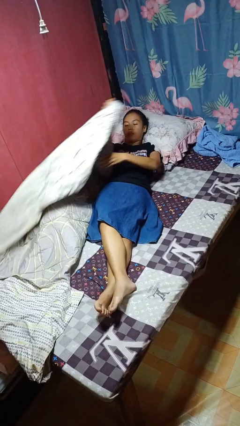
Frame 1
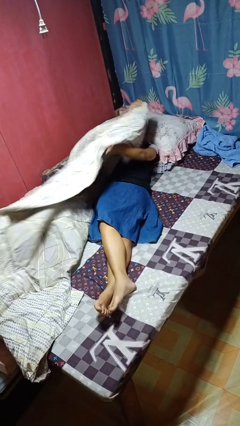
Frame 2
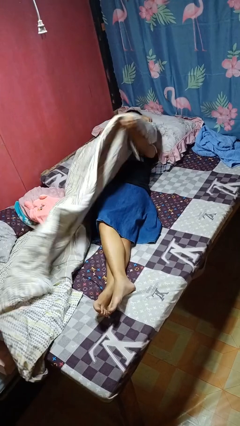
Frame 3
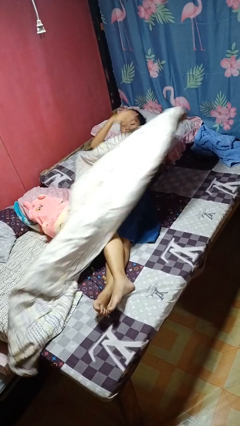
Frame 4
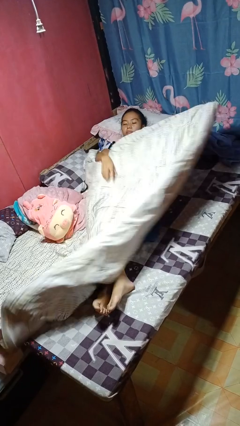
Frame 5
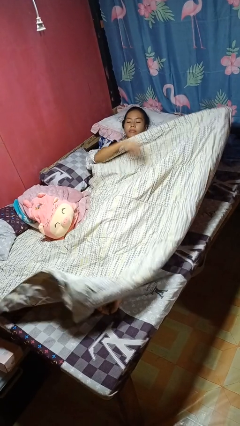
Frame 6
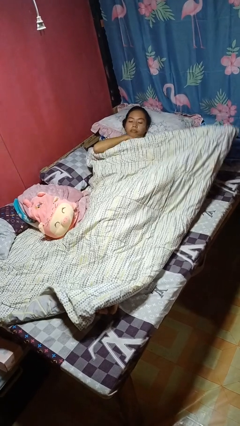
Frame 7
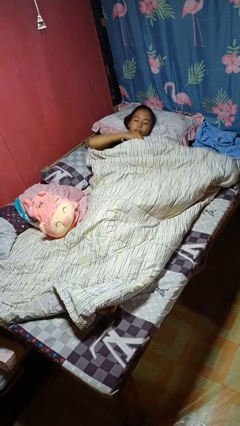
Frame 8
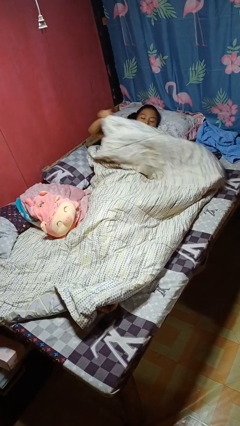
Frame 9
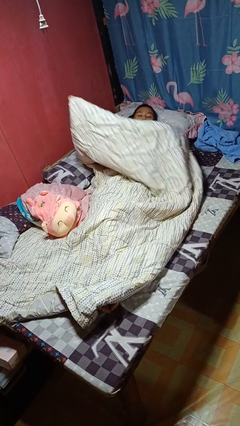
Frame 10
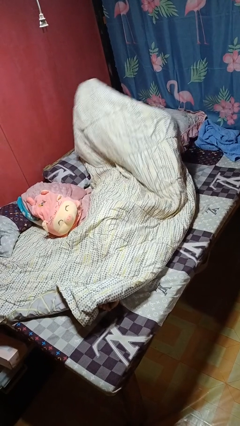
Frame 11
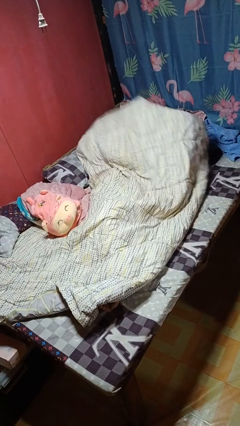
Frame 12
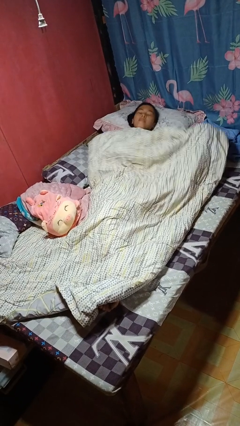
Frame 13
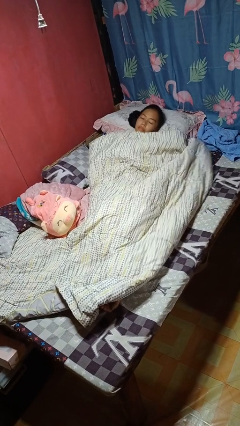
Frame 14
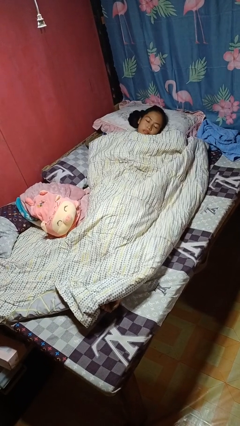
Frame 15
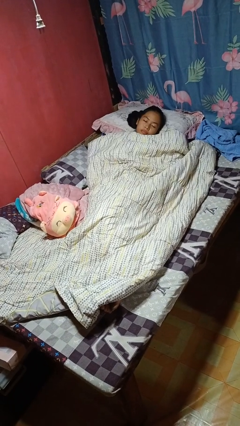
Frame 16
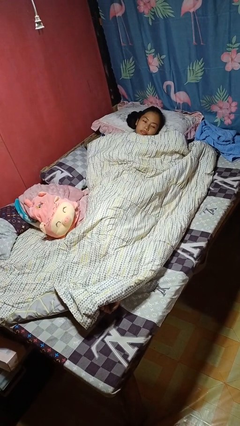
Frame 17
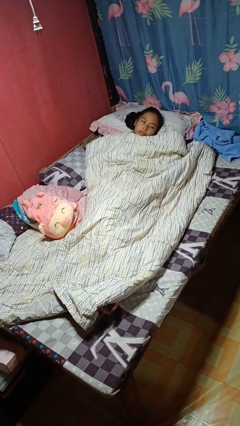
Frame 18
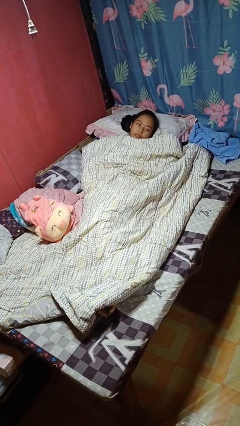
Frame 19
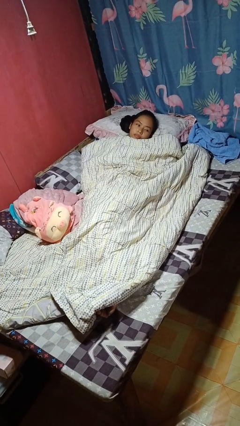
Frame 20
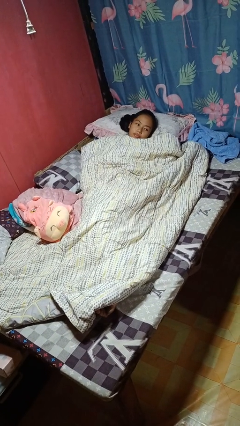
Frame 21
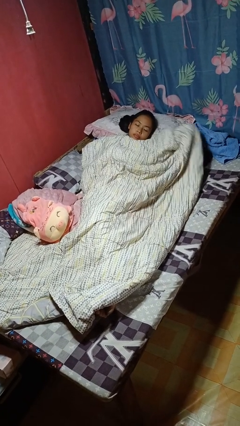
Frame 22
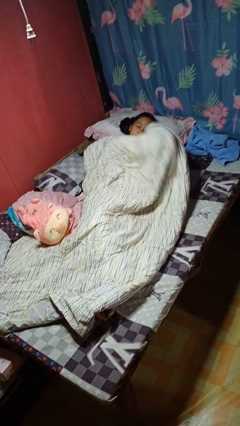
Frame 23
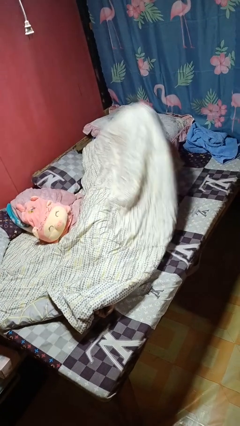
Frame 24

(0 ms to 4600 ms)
person covers with bedsheets

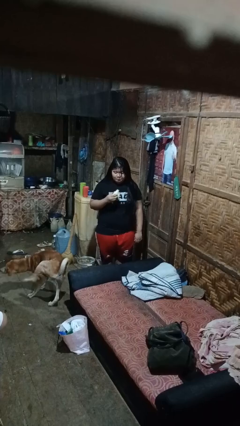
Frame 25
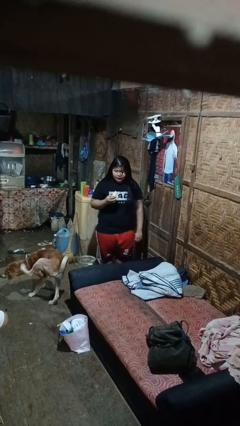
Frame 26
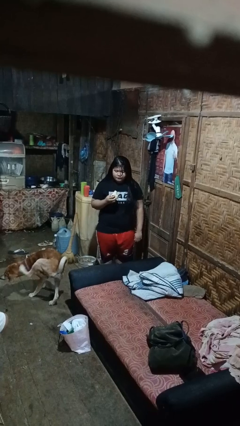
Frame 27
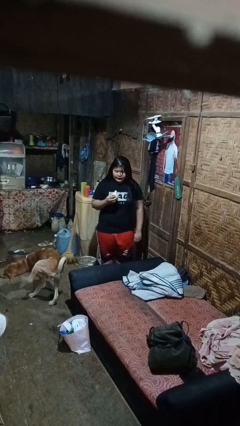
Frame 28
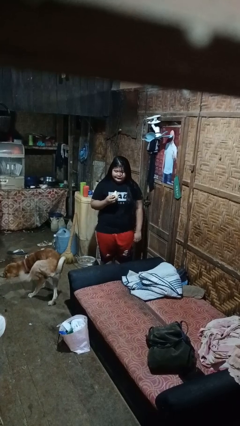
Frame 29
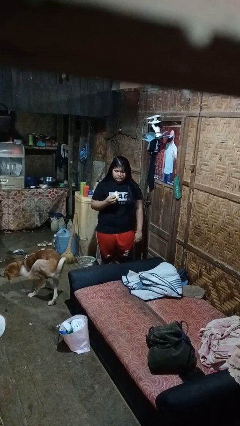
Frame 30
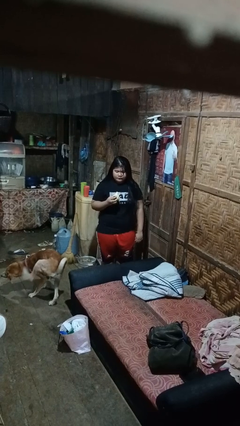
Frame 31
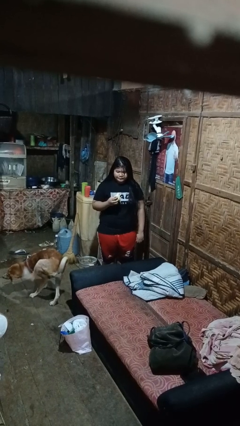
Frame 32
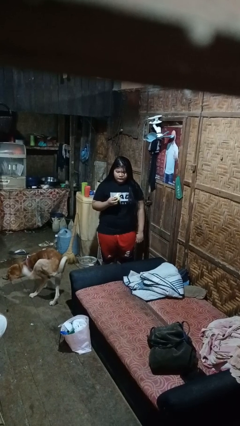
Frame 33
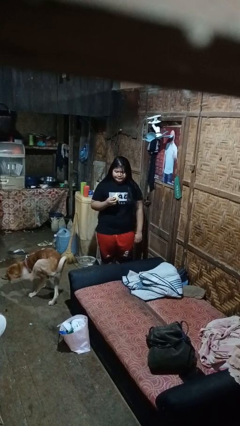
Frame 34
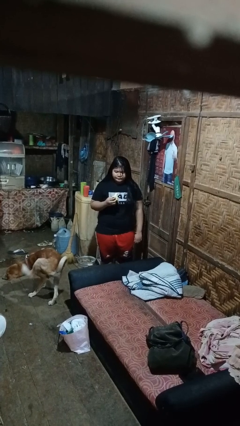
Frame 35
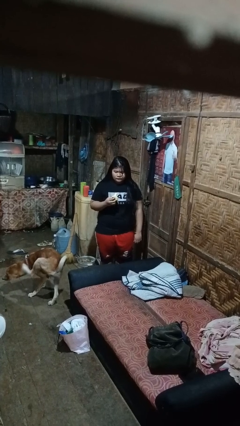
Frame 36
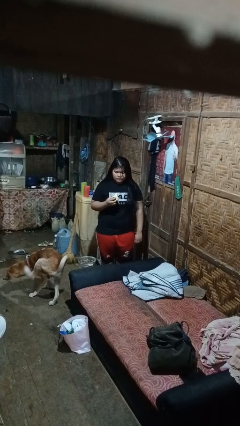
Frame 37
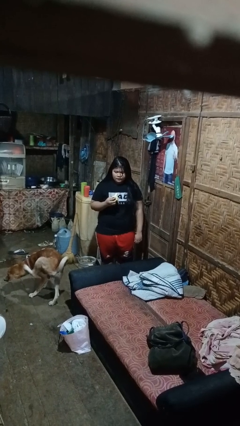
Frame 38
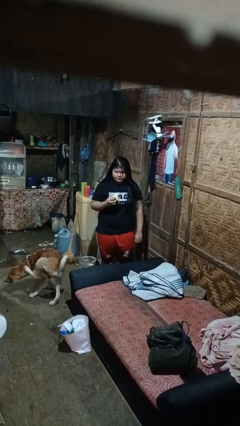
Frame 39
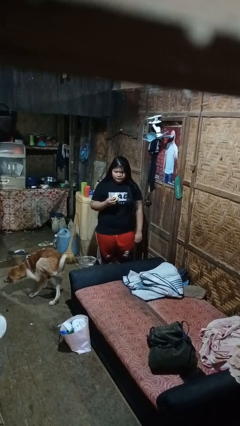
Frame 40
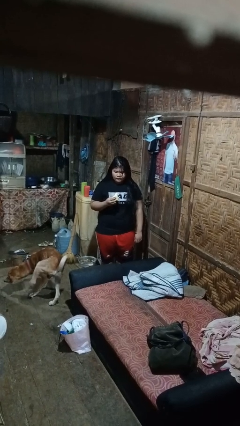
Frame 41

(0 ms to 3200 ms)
person eats banana

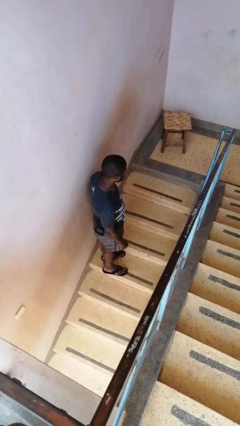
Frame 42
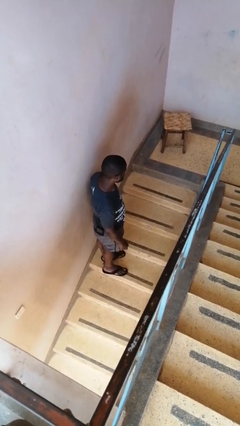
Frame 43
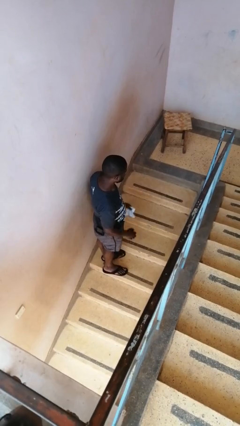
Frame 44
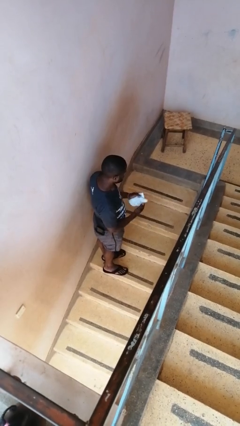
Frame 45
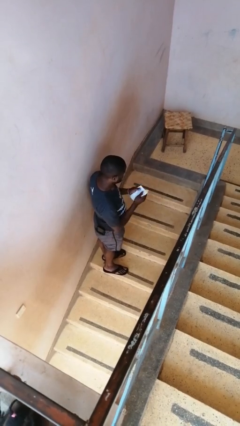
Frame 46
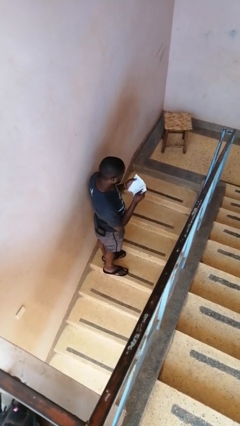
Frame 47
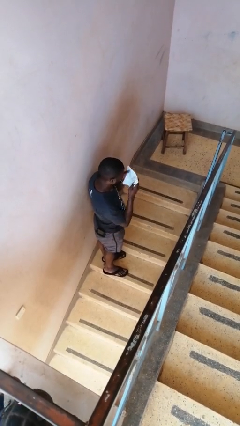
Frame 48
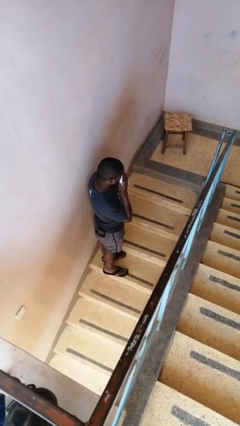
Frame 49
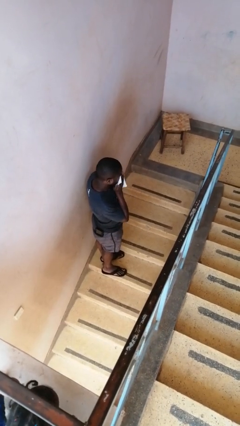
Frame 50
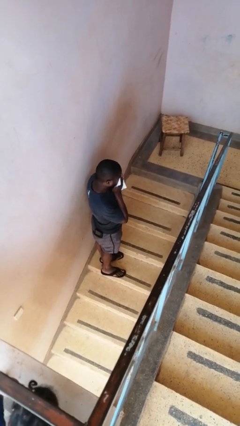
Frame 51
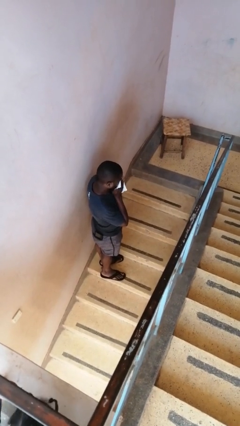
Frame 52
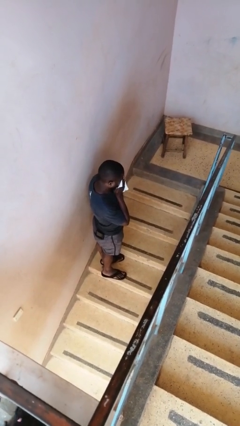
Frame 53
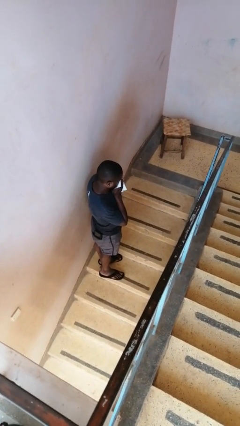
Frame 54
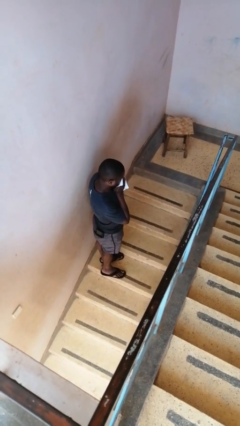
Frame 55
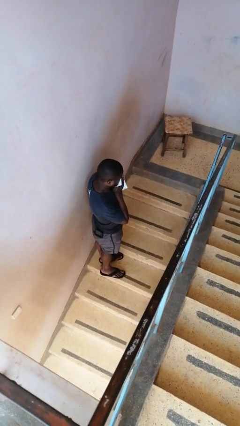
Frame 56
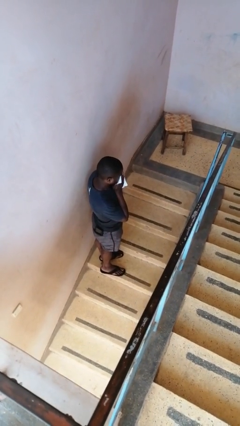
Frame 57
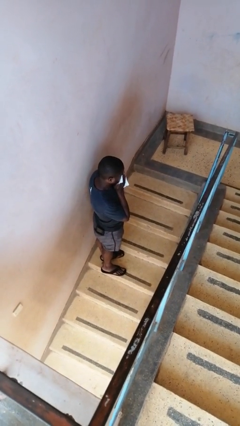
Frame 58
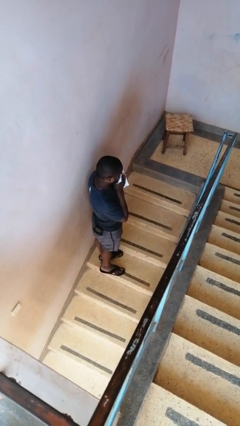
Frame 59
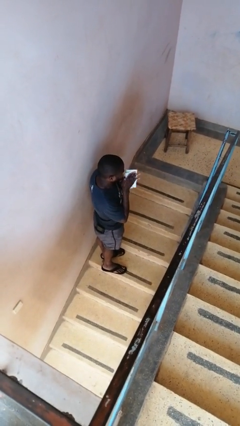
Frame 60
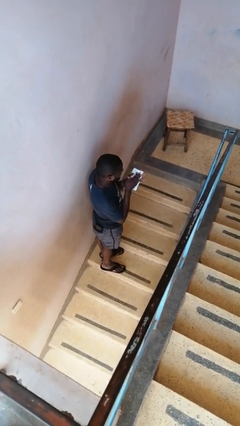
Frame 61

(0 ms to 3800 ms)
person blows nose

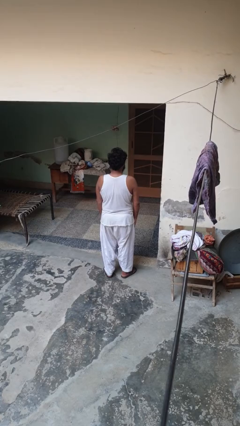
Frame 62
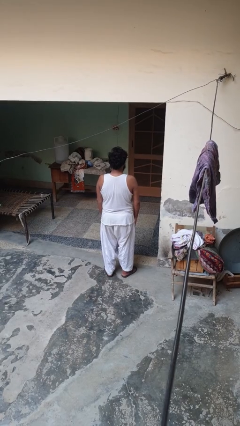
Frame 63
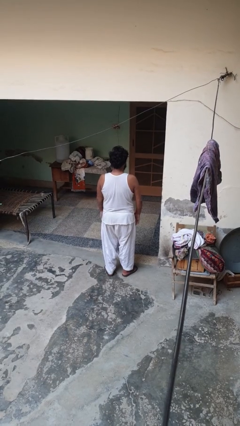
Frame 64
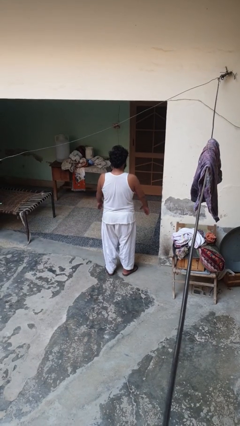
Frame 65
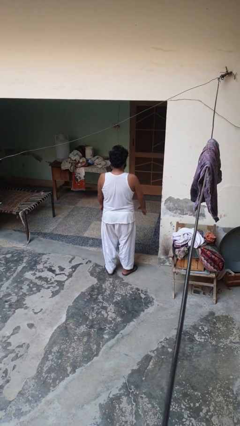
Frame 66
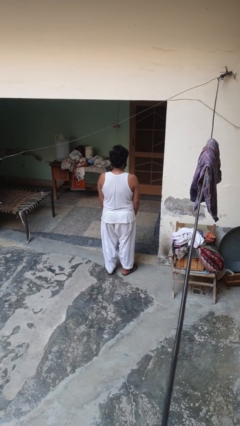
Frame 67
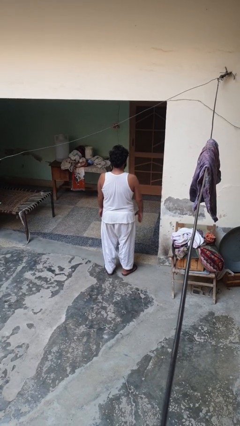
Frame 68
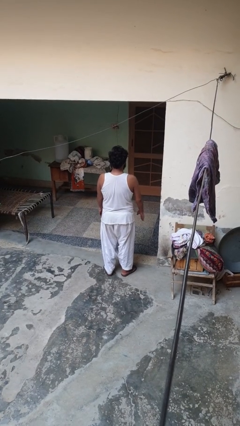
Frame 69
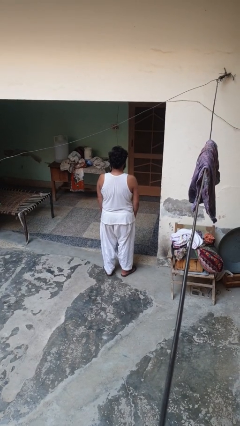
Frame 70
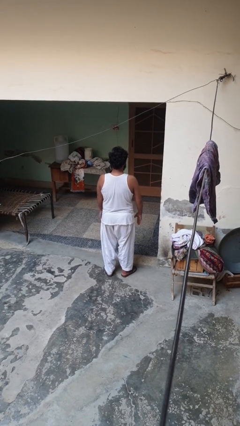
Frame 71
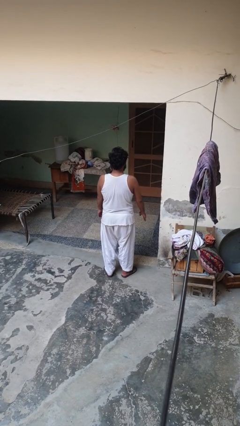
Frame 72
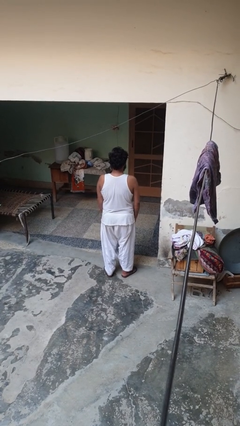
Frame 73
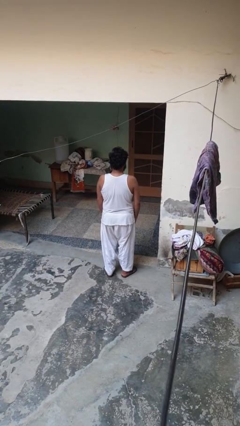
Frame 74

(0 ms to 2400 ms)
person slaps hands on thighs

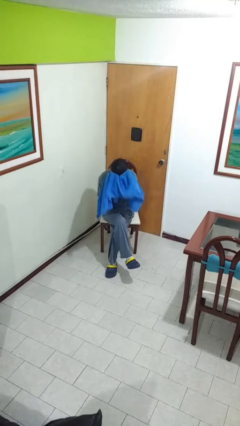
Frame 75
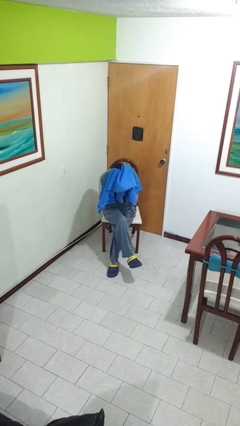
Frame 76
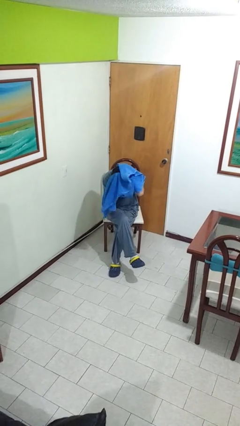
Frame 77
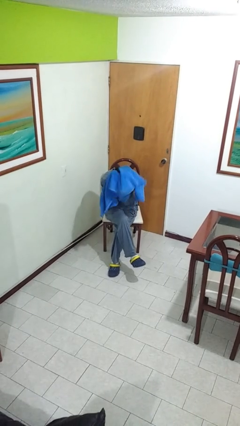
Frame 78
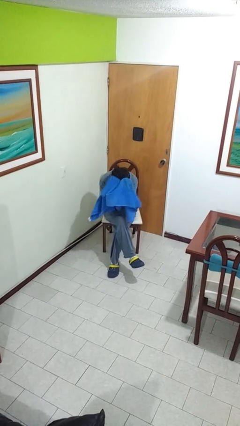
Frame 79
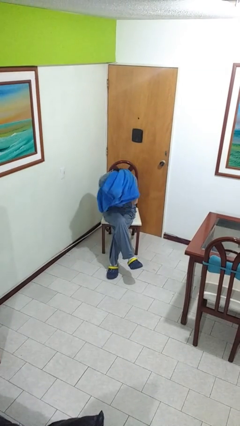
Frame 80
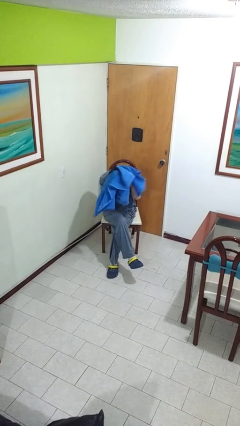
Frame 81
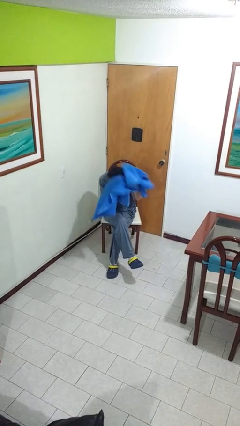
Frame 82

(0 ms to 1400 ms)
person dries hair with towel

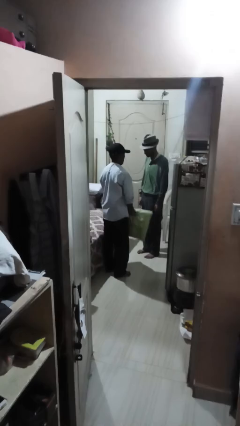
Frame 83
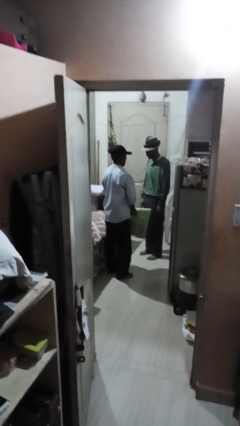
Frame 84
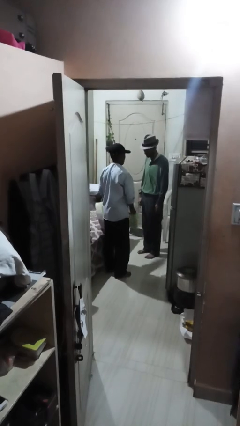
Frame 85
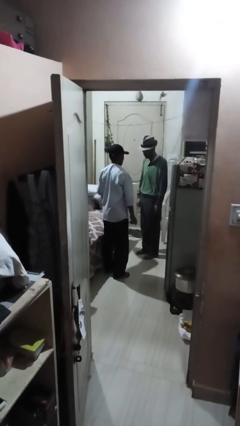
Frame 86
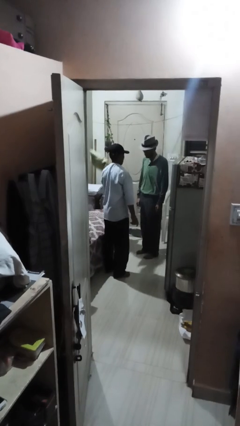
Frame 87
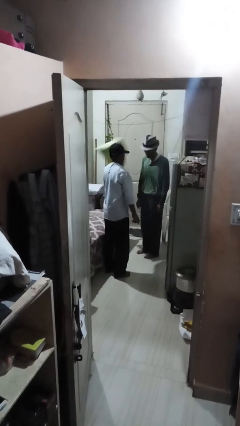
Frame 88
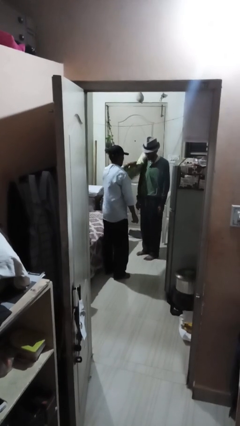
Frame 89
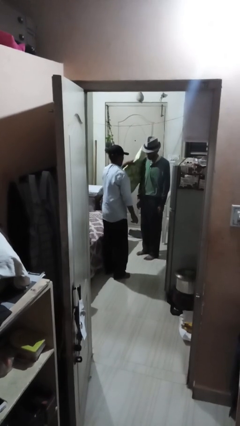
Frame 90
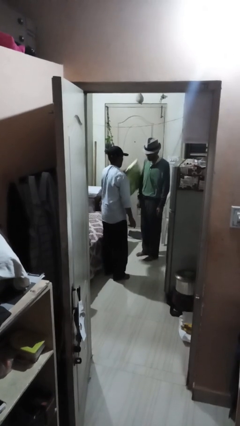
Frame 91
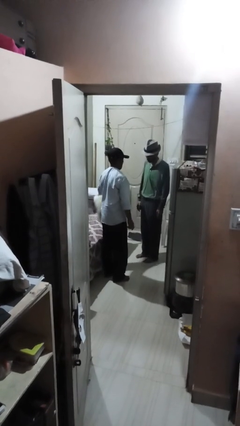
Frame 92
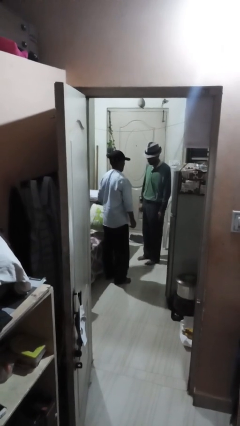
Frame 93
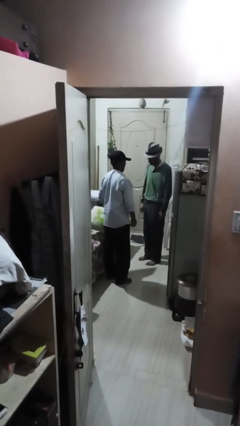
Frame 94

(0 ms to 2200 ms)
person hits person with pillow
